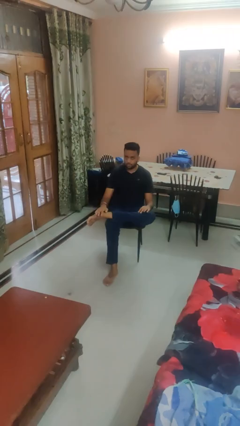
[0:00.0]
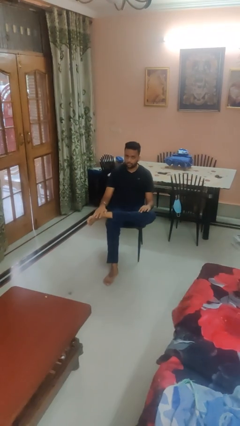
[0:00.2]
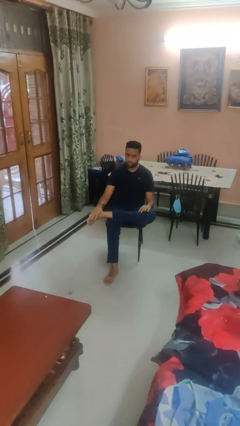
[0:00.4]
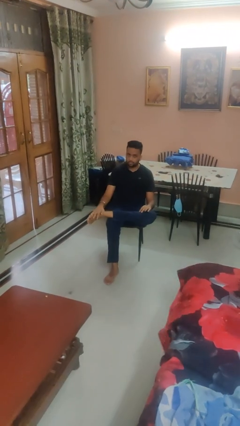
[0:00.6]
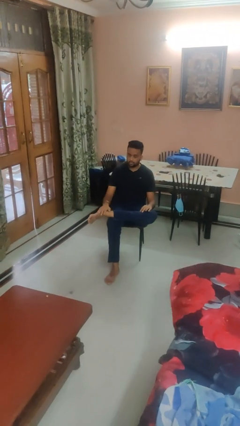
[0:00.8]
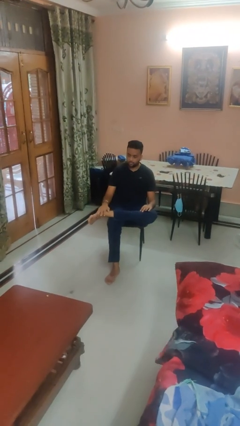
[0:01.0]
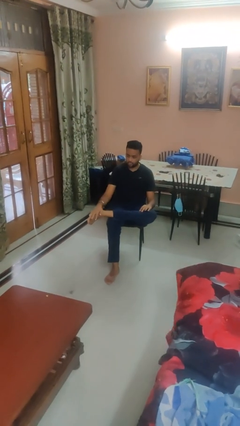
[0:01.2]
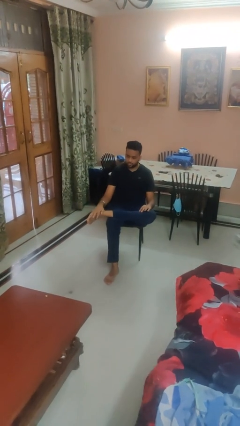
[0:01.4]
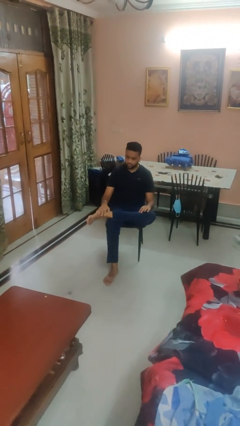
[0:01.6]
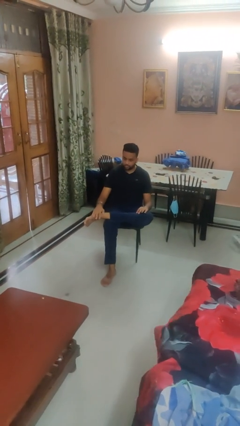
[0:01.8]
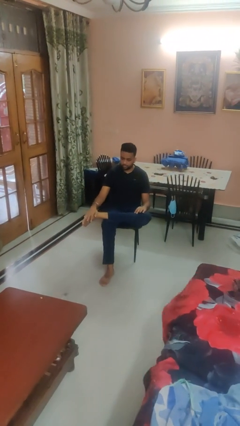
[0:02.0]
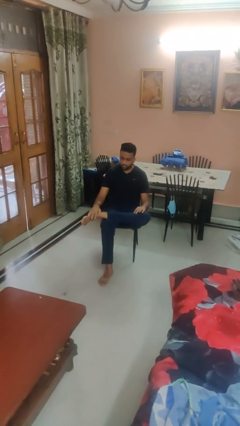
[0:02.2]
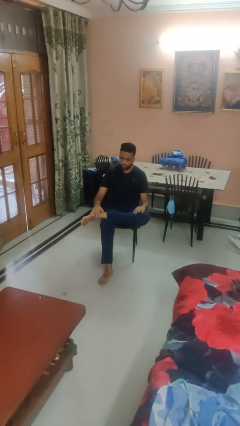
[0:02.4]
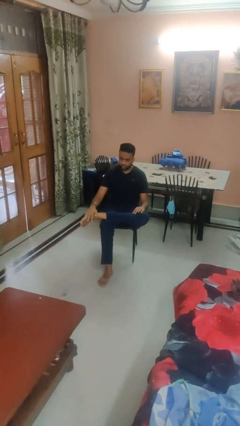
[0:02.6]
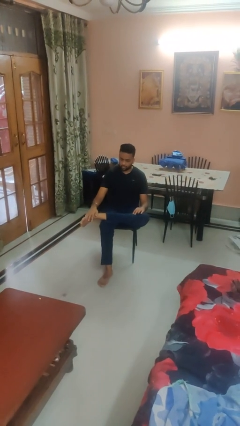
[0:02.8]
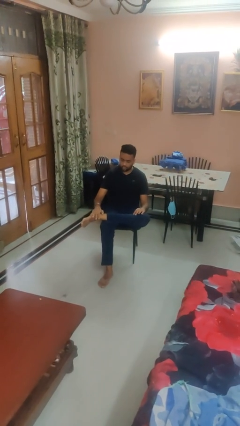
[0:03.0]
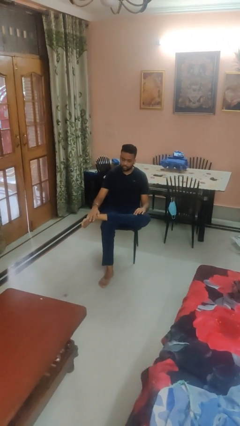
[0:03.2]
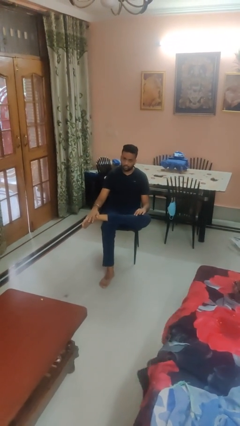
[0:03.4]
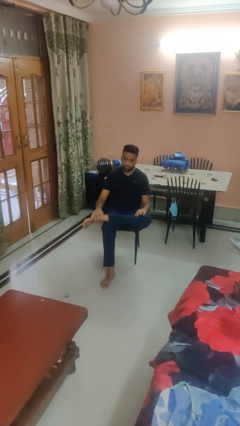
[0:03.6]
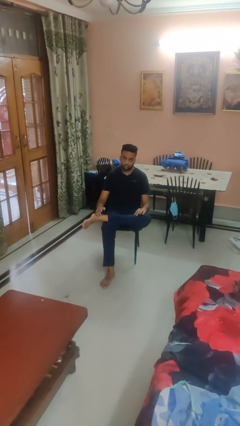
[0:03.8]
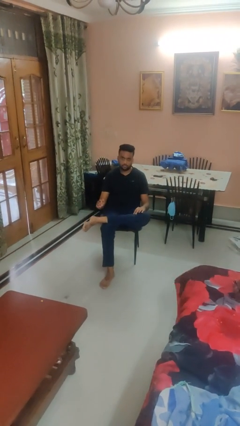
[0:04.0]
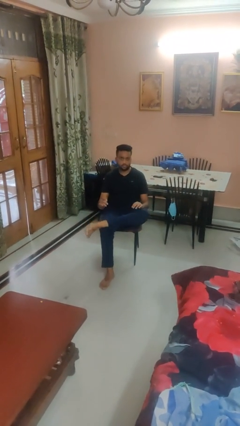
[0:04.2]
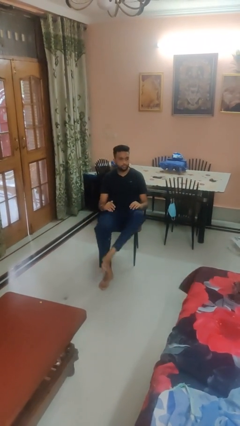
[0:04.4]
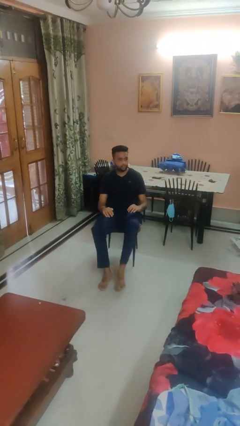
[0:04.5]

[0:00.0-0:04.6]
person rubs foot

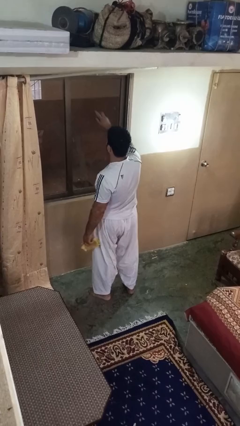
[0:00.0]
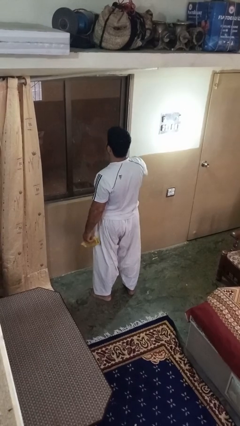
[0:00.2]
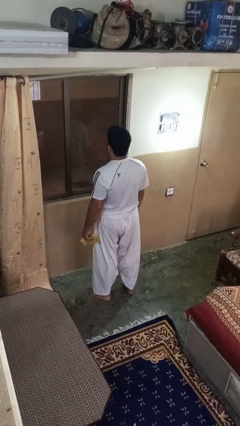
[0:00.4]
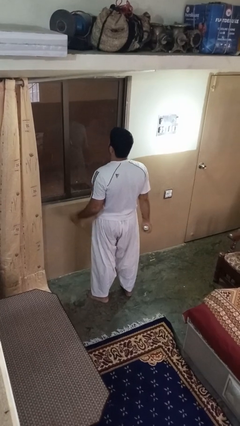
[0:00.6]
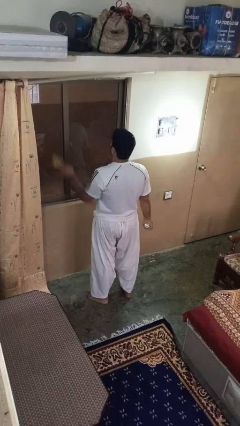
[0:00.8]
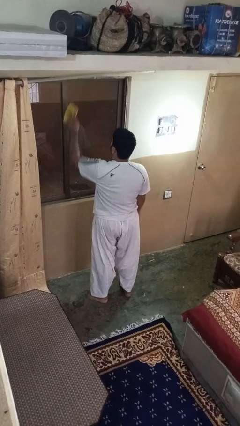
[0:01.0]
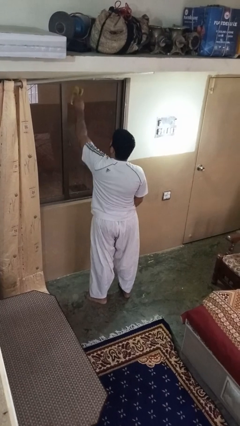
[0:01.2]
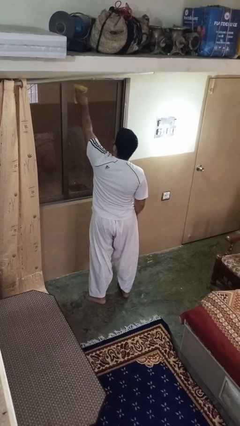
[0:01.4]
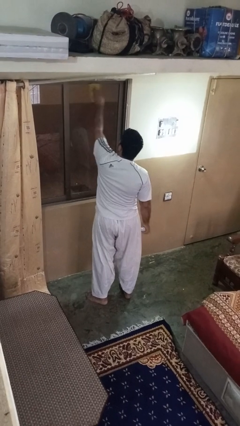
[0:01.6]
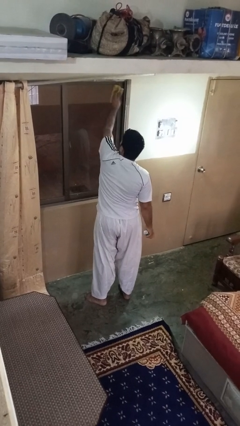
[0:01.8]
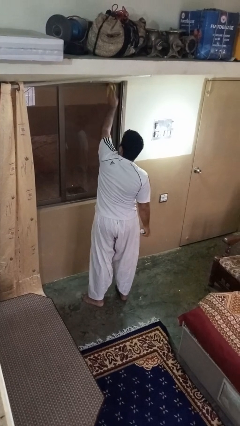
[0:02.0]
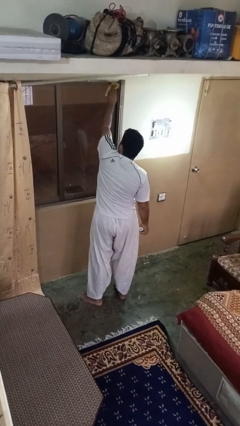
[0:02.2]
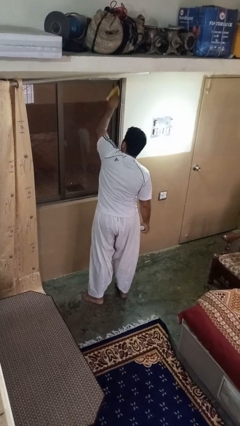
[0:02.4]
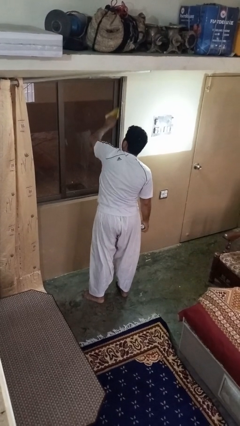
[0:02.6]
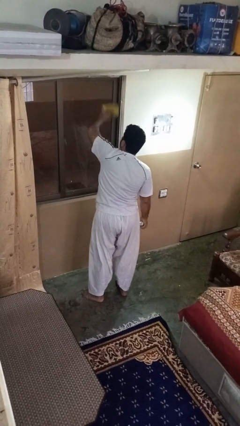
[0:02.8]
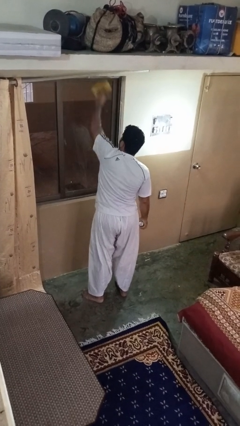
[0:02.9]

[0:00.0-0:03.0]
person washes window

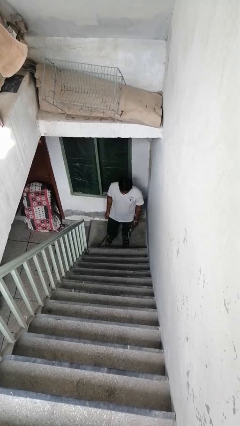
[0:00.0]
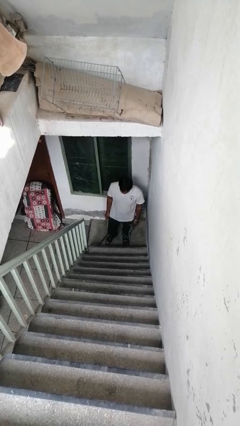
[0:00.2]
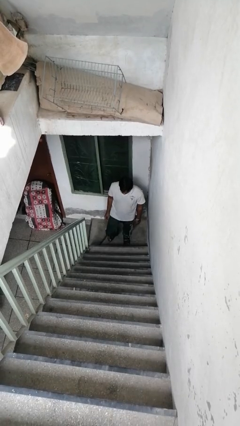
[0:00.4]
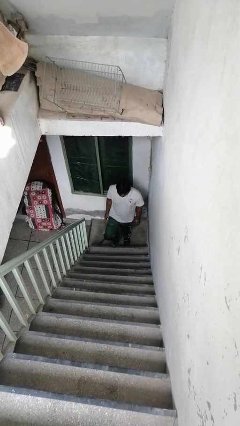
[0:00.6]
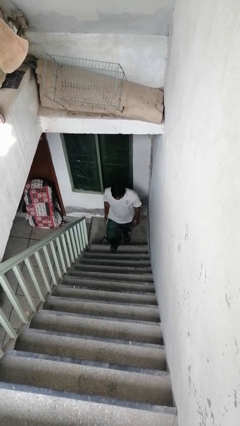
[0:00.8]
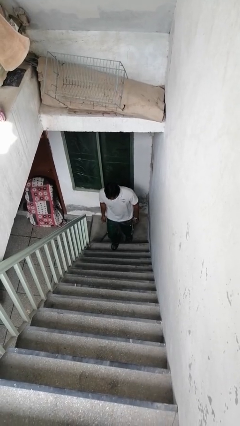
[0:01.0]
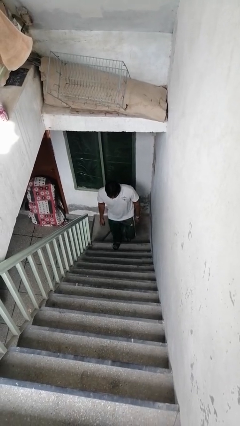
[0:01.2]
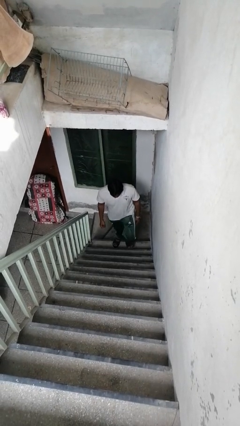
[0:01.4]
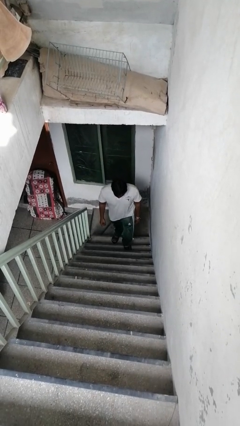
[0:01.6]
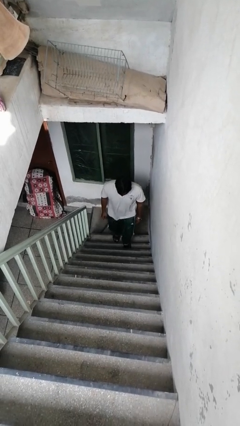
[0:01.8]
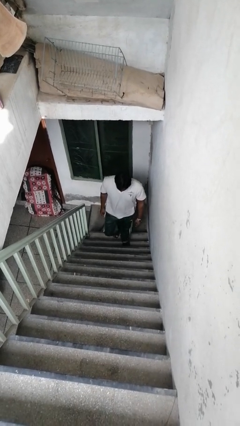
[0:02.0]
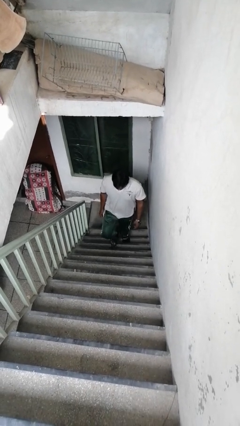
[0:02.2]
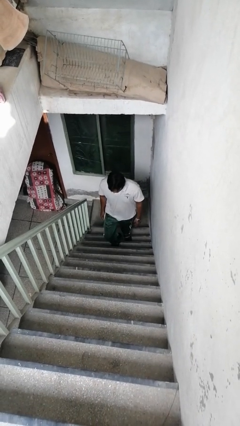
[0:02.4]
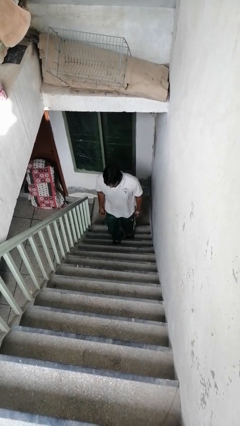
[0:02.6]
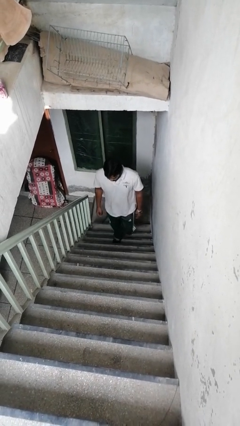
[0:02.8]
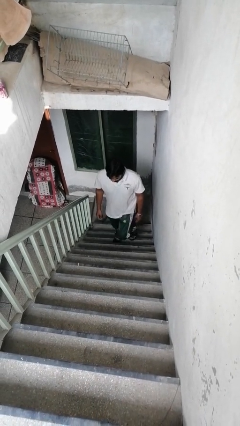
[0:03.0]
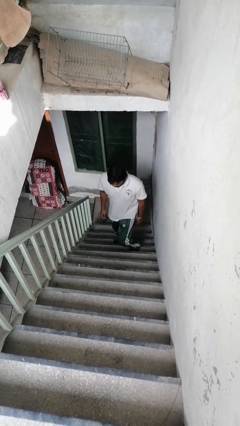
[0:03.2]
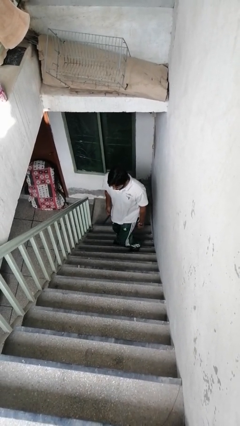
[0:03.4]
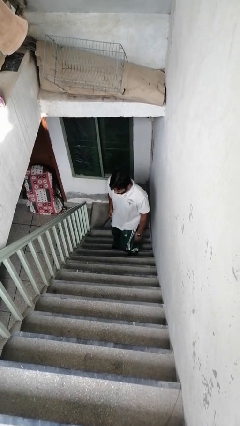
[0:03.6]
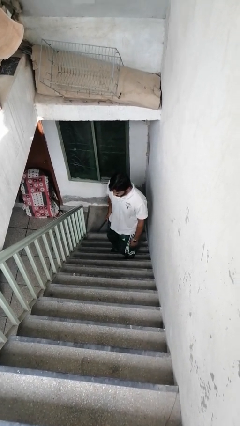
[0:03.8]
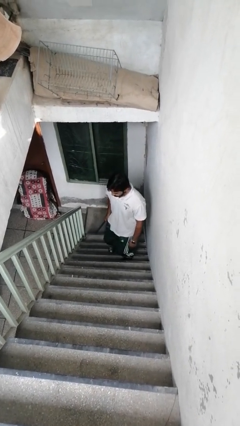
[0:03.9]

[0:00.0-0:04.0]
person climbs up stairs

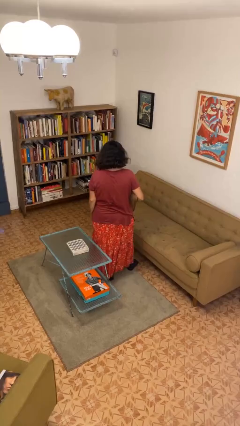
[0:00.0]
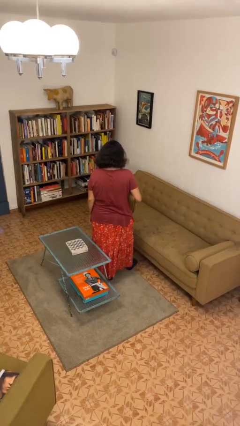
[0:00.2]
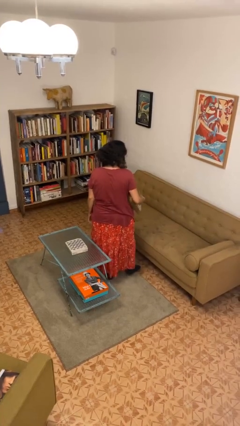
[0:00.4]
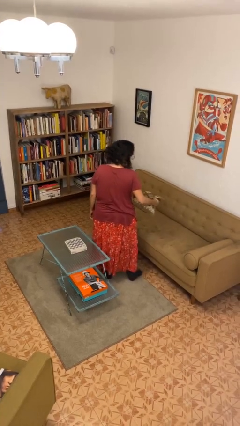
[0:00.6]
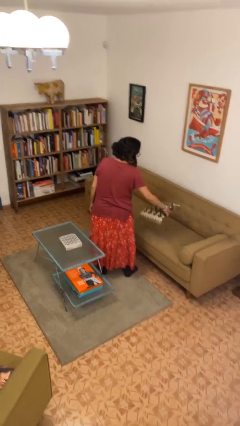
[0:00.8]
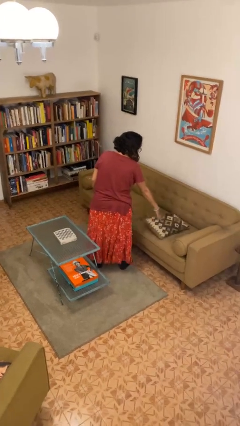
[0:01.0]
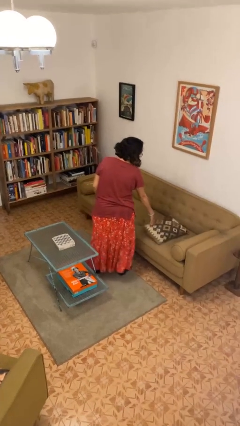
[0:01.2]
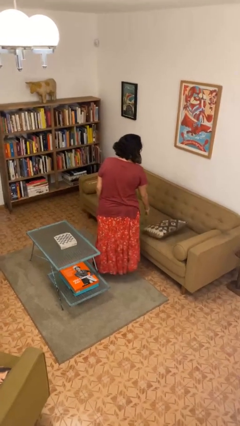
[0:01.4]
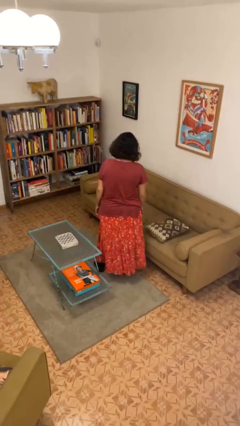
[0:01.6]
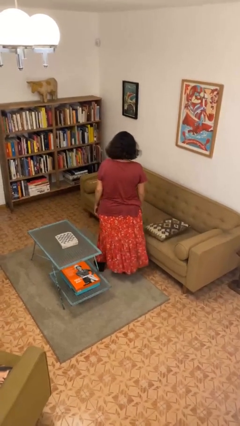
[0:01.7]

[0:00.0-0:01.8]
person puts down object on couch

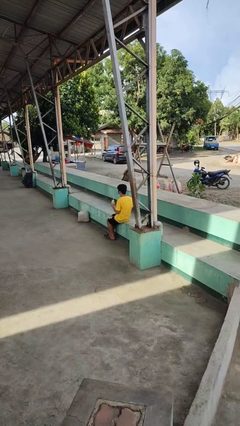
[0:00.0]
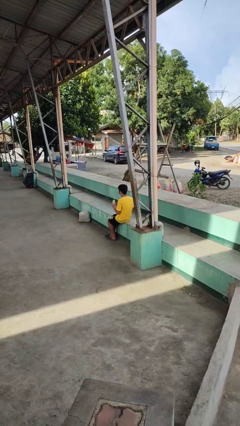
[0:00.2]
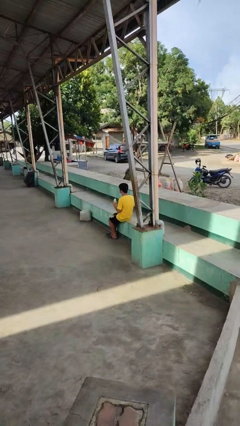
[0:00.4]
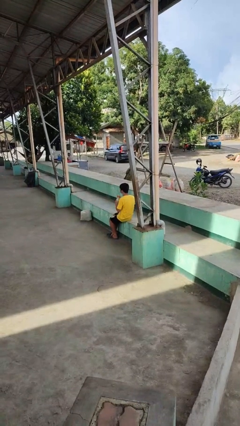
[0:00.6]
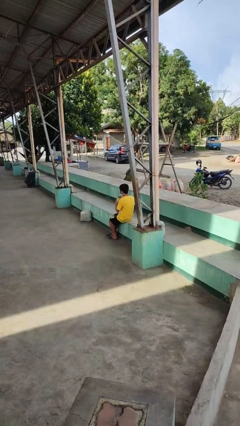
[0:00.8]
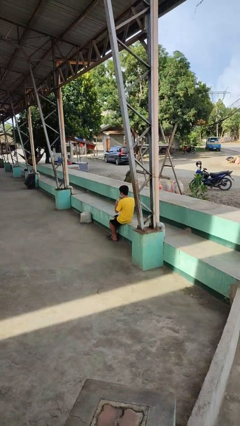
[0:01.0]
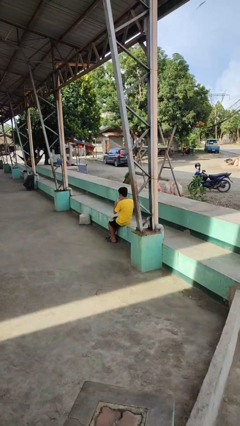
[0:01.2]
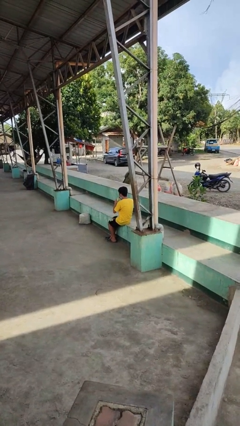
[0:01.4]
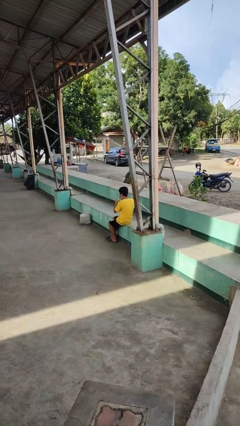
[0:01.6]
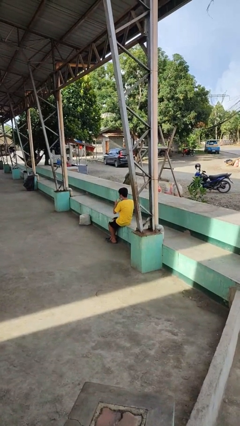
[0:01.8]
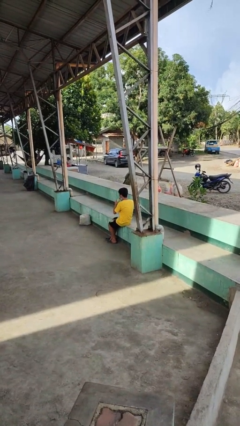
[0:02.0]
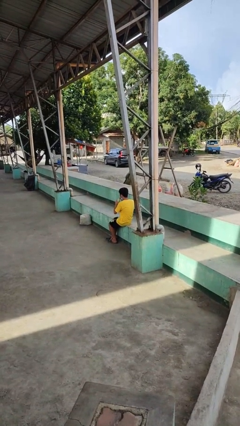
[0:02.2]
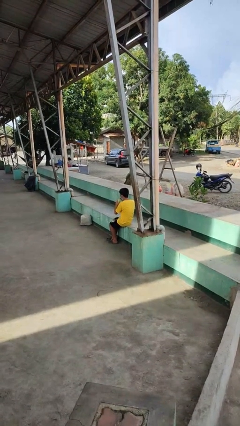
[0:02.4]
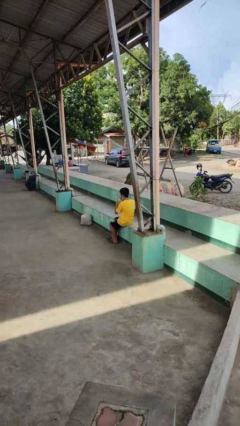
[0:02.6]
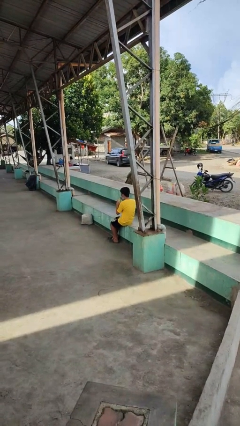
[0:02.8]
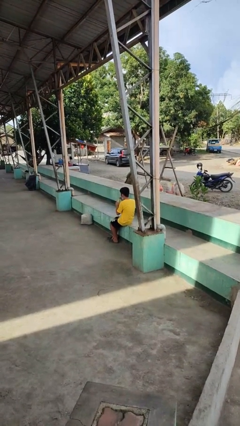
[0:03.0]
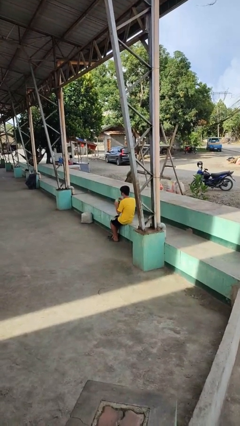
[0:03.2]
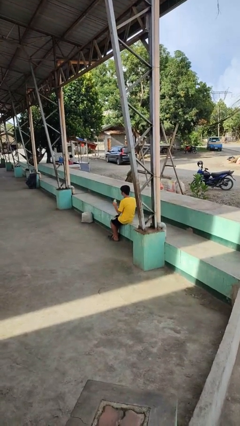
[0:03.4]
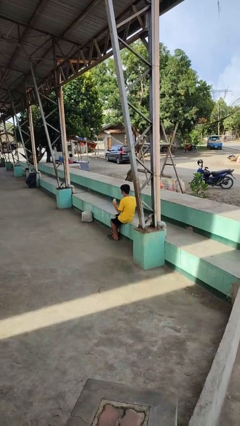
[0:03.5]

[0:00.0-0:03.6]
person drinks from straw

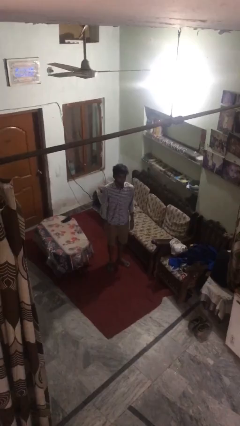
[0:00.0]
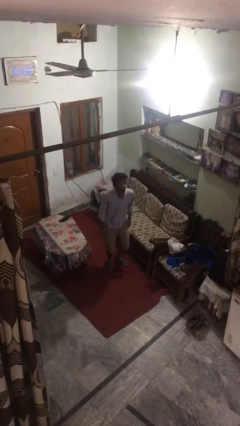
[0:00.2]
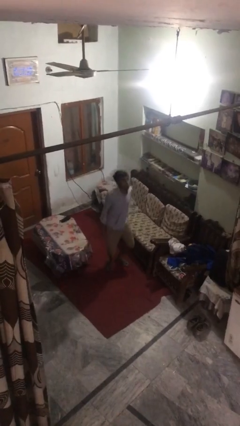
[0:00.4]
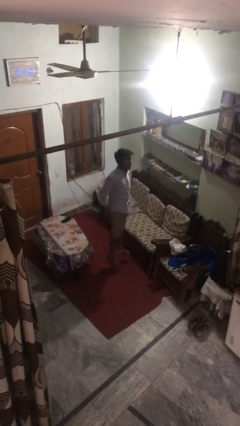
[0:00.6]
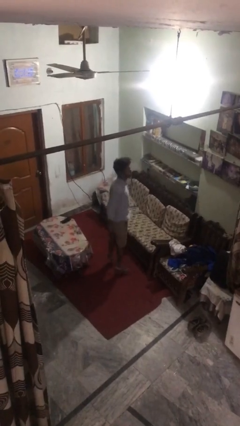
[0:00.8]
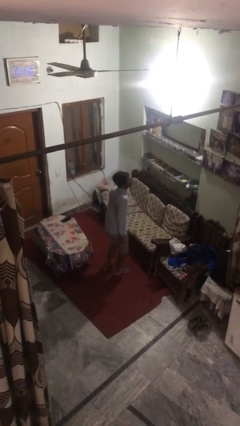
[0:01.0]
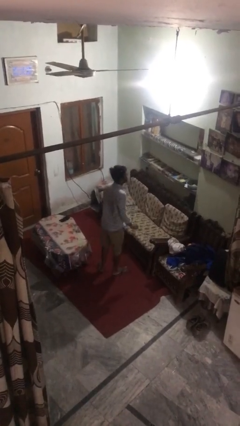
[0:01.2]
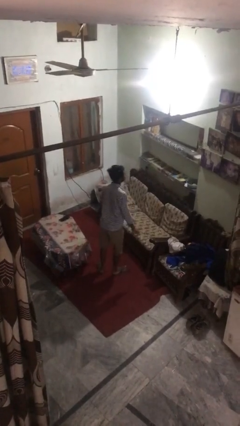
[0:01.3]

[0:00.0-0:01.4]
person jumps
